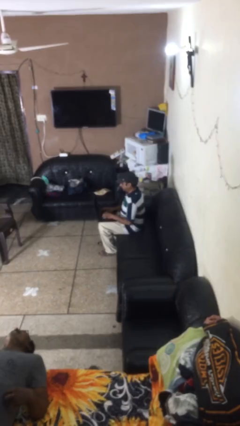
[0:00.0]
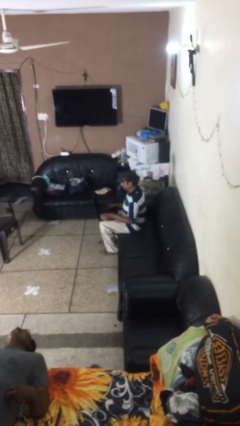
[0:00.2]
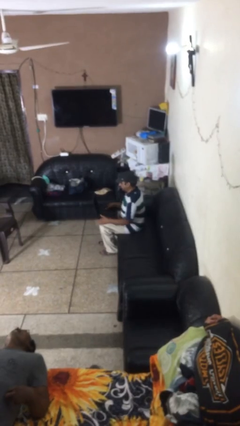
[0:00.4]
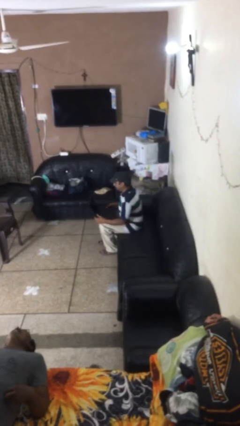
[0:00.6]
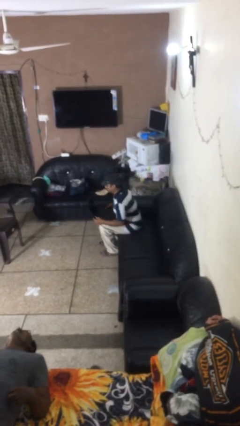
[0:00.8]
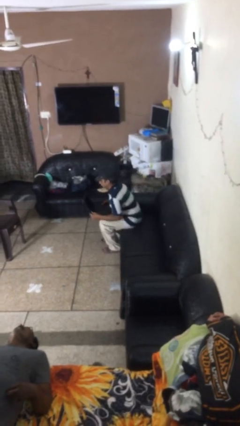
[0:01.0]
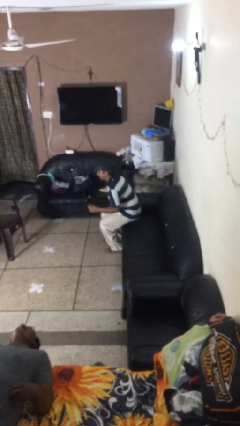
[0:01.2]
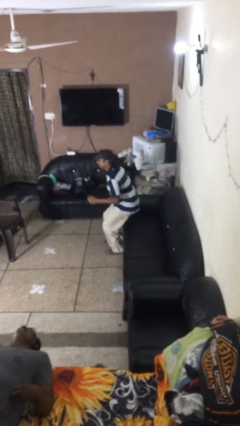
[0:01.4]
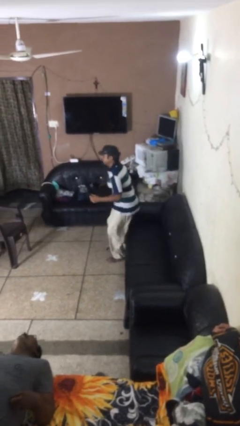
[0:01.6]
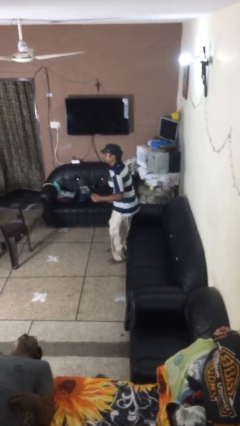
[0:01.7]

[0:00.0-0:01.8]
person stands up

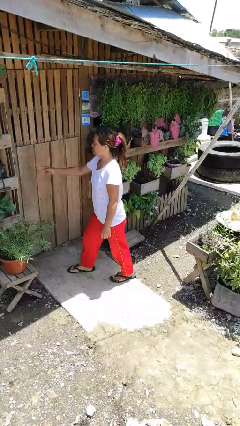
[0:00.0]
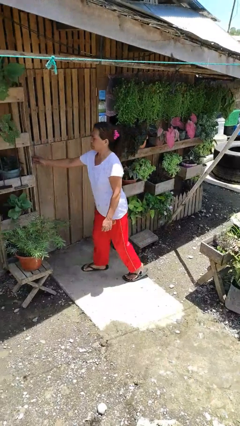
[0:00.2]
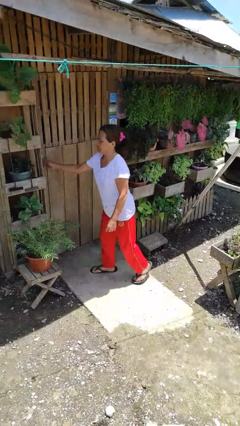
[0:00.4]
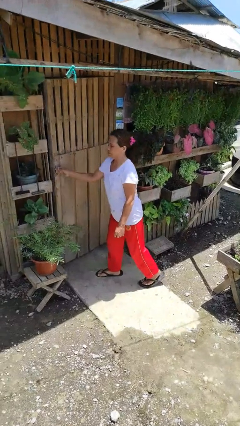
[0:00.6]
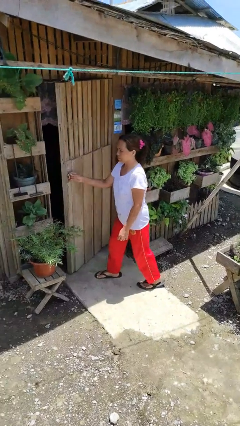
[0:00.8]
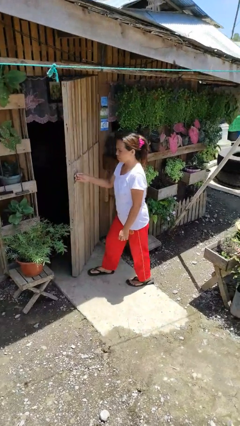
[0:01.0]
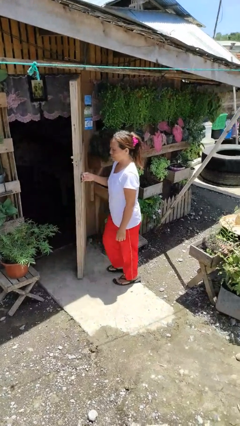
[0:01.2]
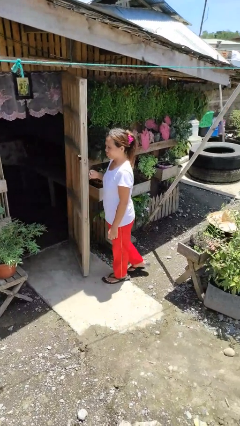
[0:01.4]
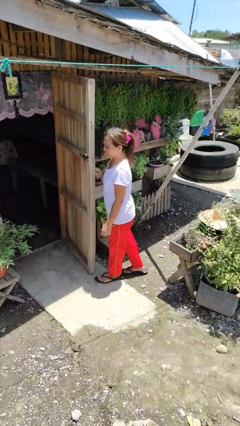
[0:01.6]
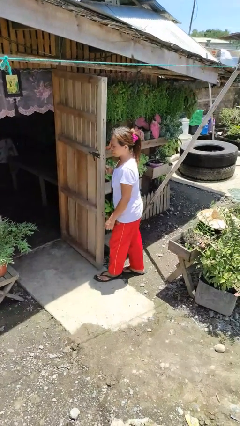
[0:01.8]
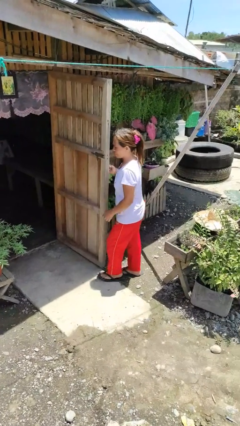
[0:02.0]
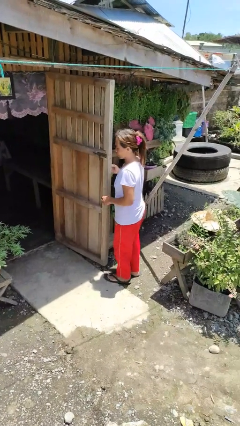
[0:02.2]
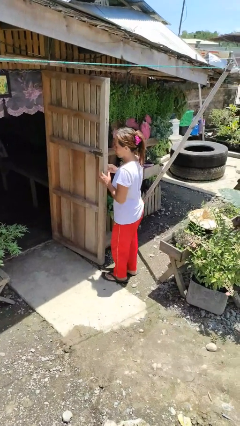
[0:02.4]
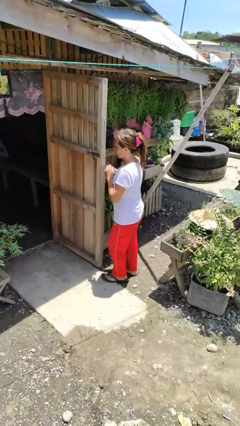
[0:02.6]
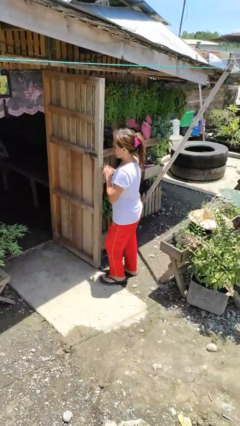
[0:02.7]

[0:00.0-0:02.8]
person opens facility door

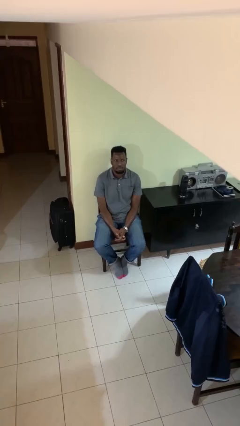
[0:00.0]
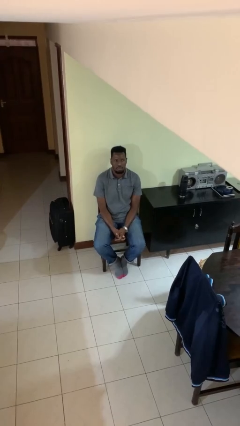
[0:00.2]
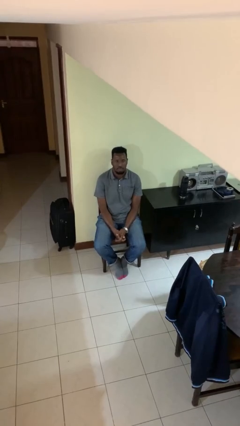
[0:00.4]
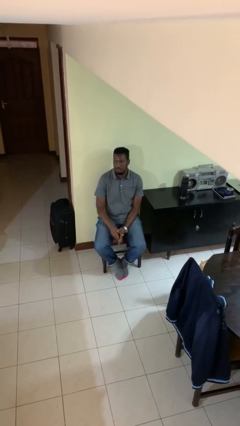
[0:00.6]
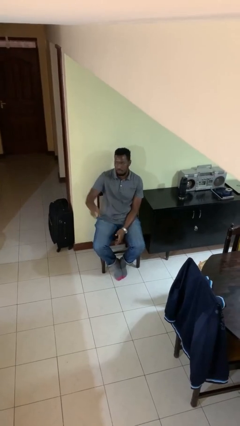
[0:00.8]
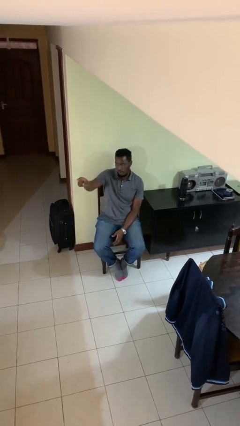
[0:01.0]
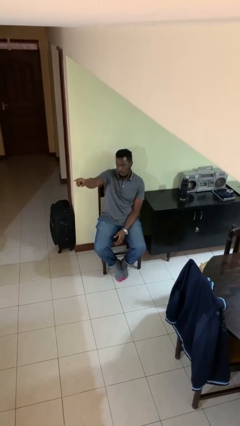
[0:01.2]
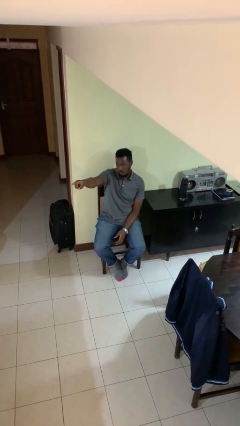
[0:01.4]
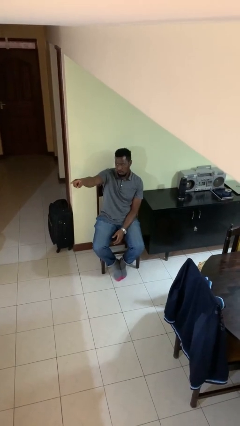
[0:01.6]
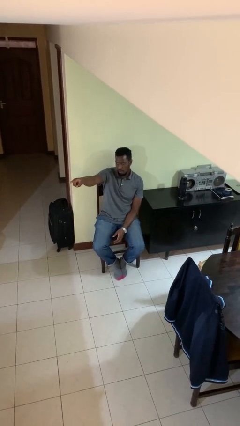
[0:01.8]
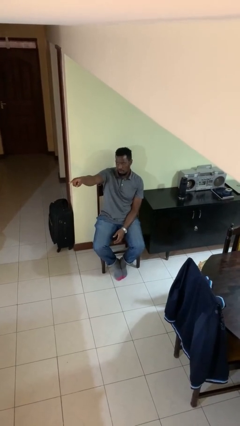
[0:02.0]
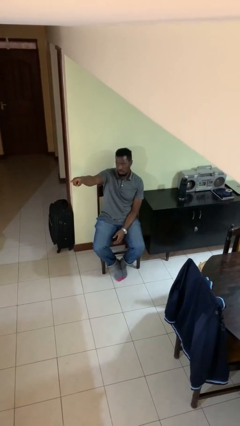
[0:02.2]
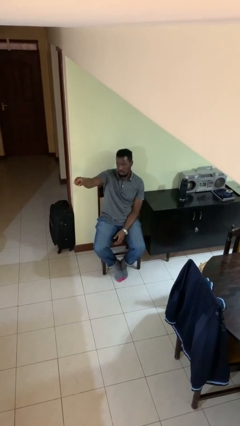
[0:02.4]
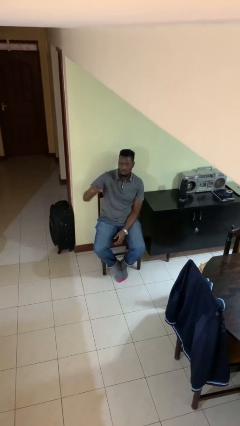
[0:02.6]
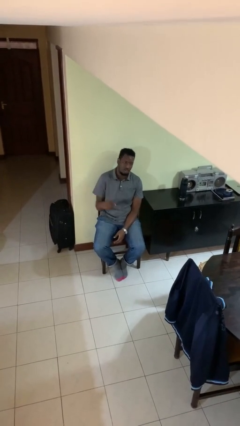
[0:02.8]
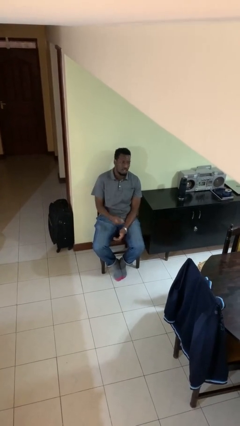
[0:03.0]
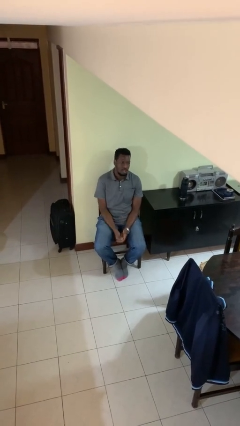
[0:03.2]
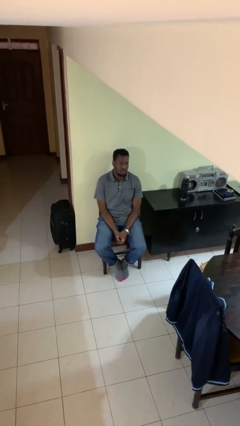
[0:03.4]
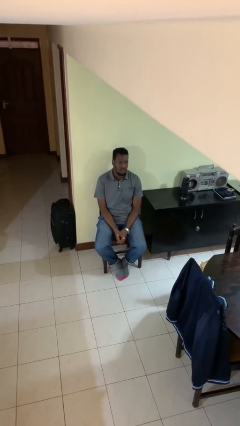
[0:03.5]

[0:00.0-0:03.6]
person points at person

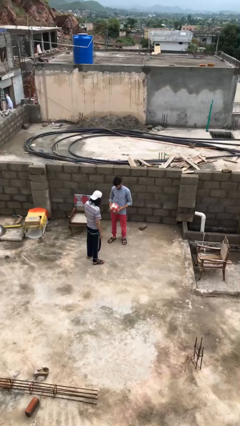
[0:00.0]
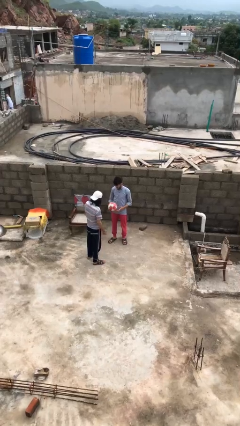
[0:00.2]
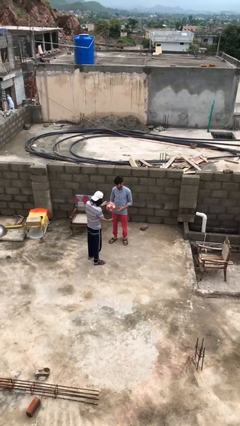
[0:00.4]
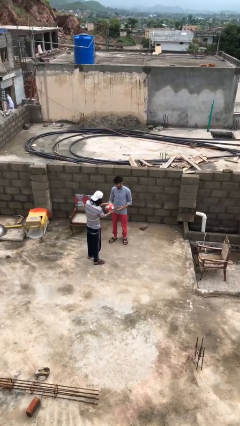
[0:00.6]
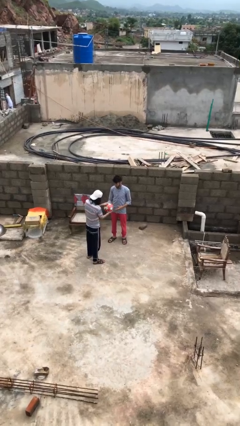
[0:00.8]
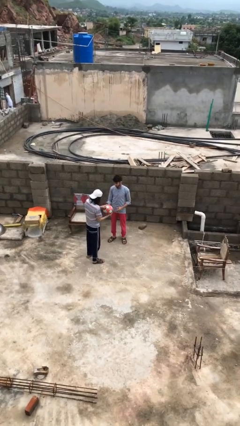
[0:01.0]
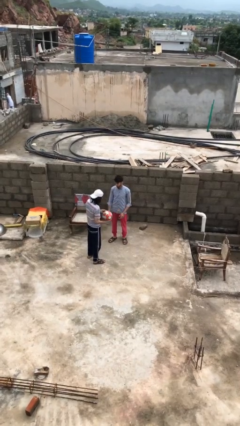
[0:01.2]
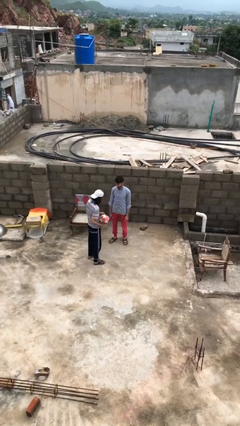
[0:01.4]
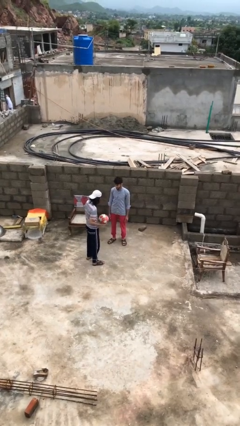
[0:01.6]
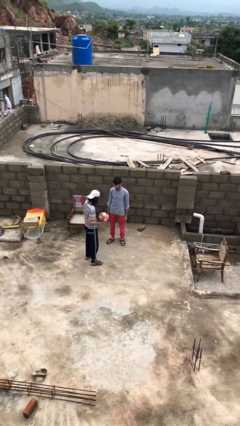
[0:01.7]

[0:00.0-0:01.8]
person transfers object to person

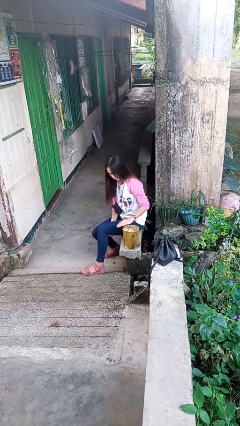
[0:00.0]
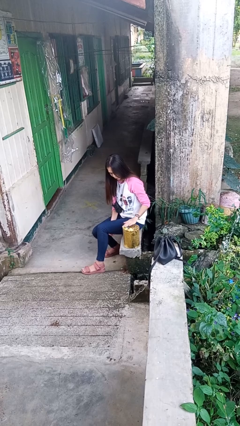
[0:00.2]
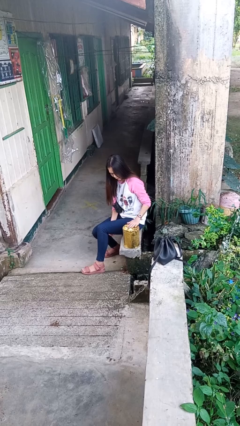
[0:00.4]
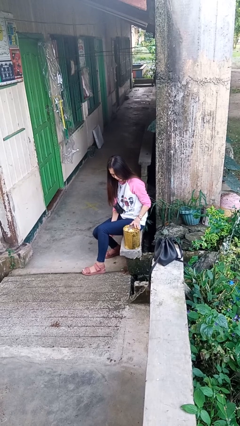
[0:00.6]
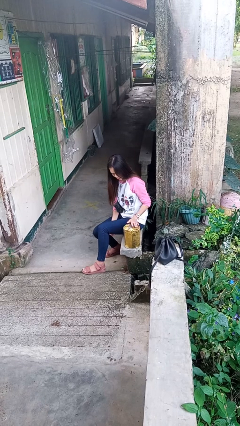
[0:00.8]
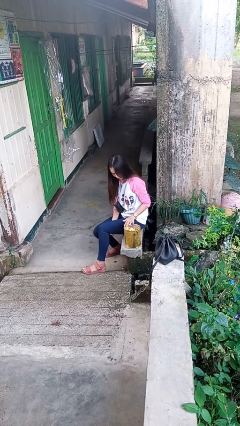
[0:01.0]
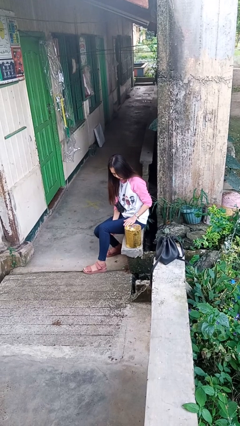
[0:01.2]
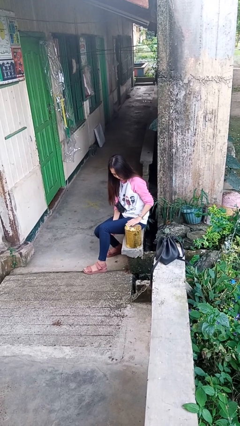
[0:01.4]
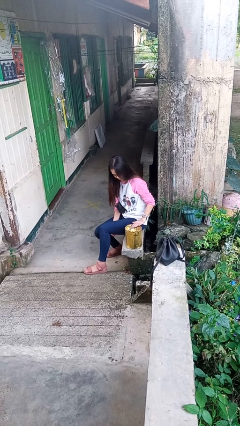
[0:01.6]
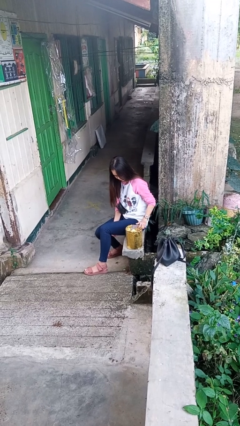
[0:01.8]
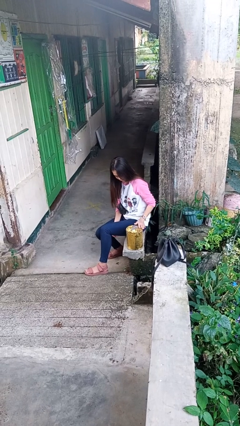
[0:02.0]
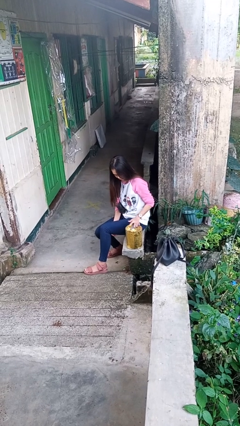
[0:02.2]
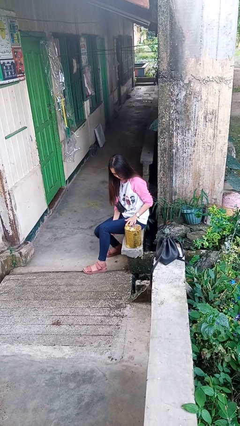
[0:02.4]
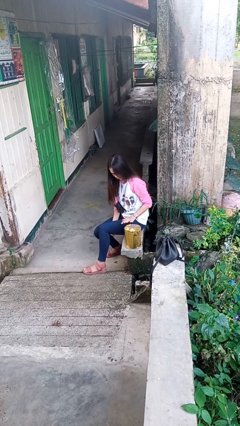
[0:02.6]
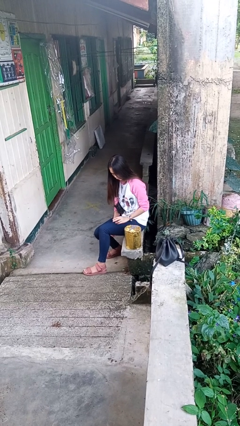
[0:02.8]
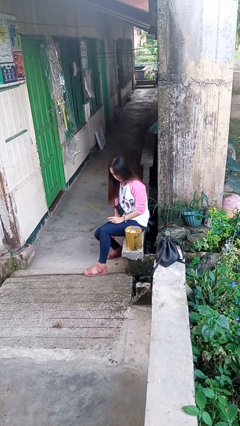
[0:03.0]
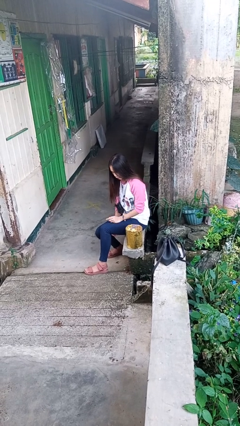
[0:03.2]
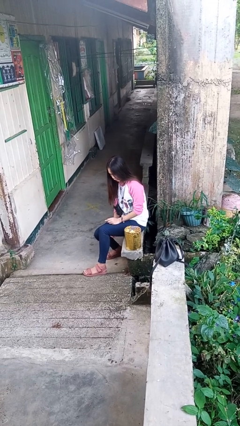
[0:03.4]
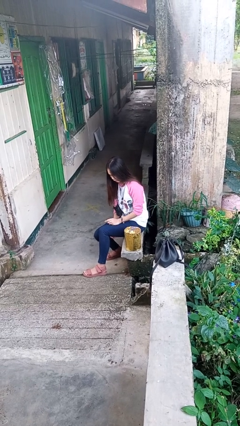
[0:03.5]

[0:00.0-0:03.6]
person waves hand over object

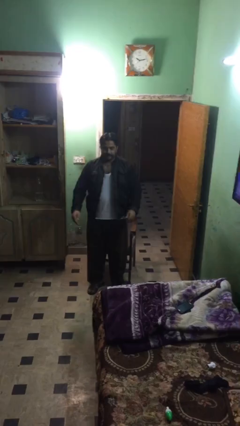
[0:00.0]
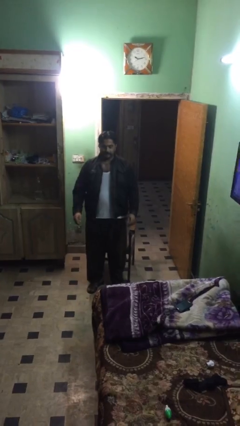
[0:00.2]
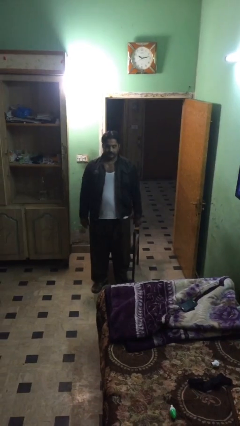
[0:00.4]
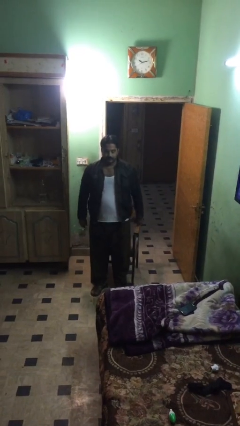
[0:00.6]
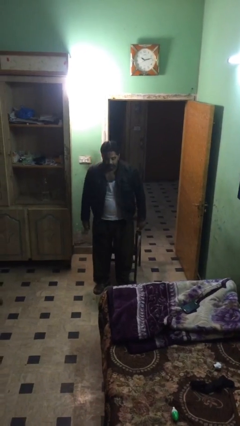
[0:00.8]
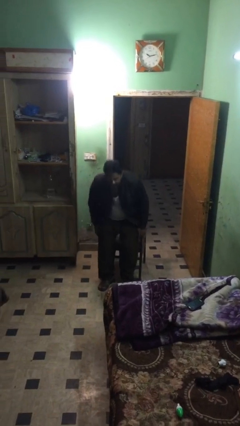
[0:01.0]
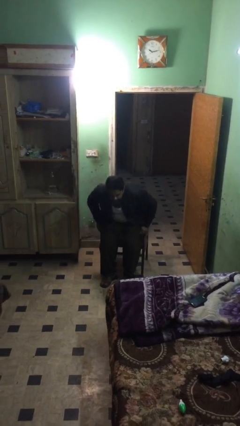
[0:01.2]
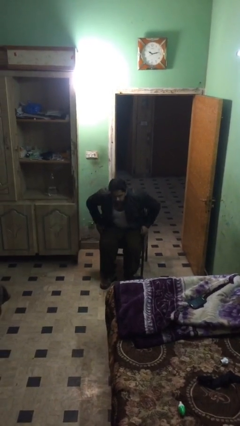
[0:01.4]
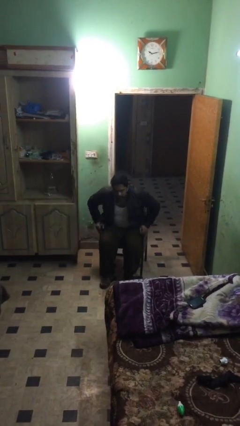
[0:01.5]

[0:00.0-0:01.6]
person sits down

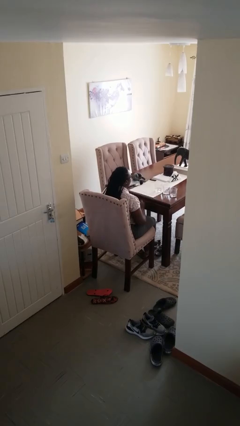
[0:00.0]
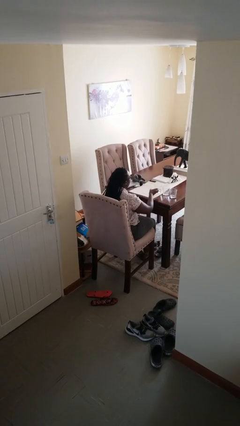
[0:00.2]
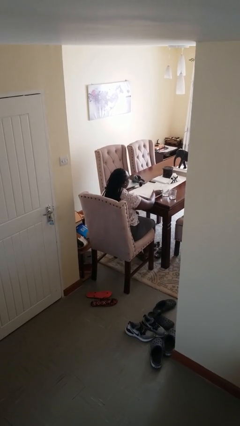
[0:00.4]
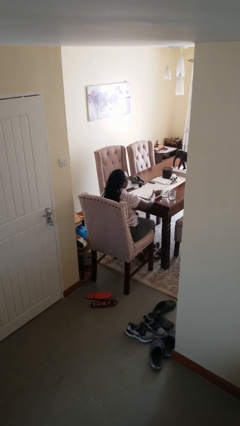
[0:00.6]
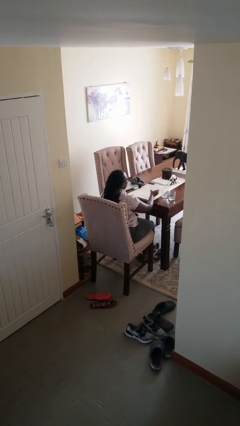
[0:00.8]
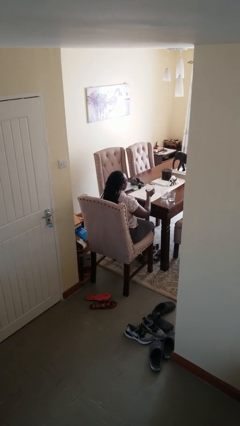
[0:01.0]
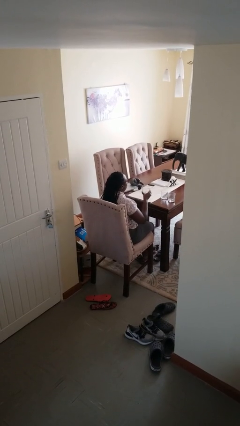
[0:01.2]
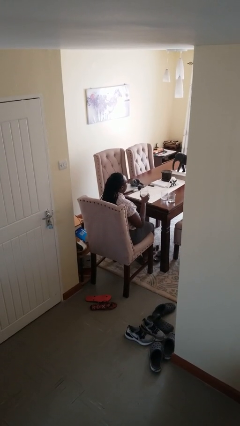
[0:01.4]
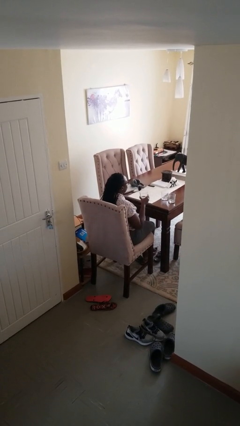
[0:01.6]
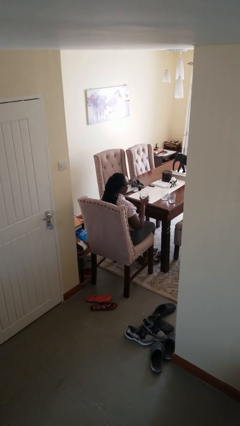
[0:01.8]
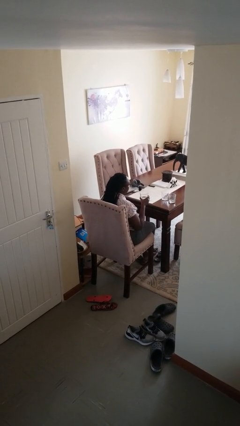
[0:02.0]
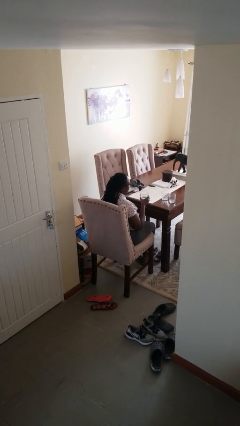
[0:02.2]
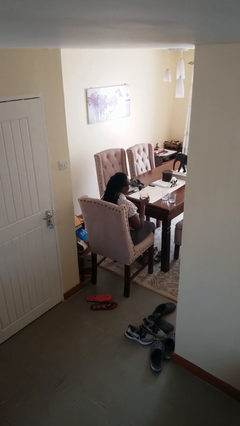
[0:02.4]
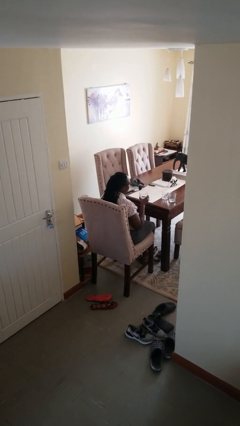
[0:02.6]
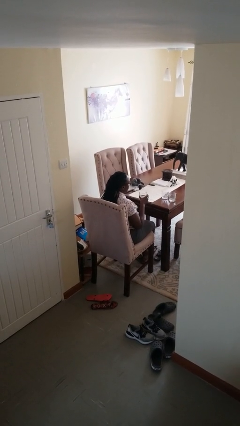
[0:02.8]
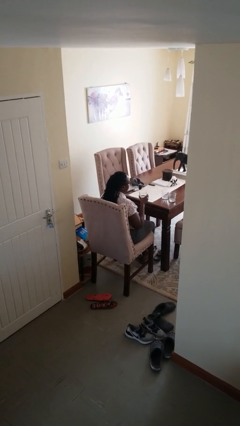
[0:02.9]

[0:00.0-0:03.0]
person picks up object from table
